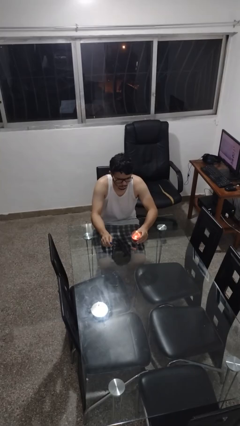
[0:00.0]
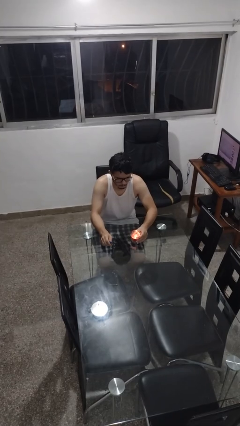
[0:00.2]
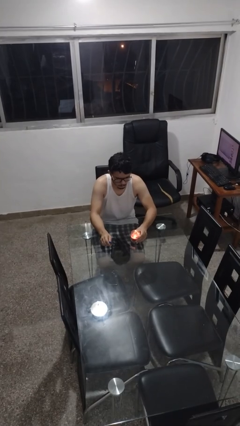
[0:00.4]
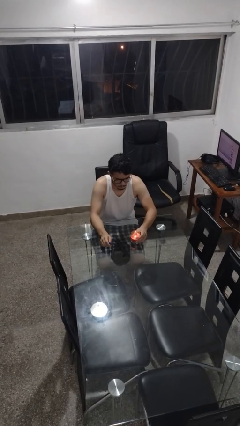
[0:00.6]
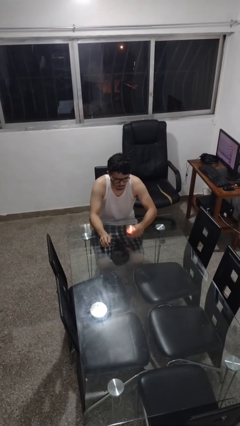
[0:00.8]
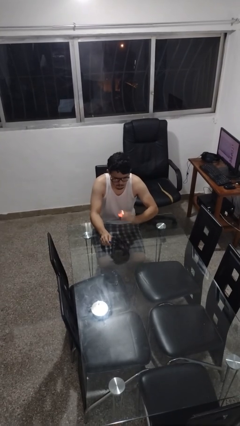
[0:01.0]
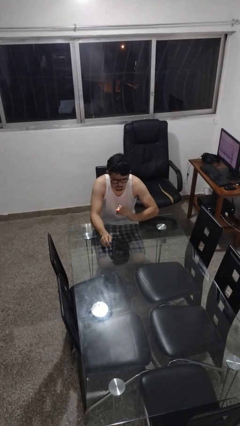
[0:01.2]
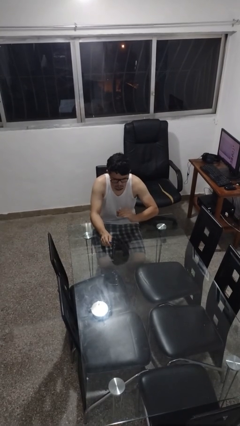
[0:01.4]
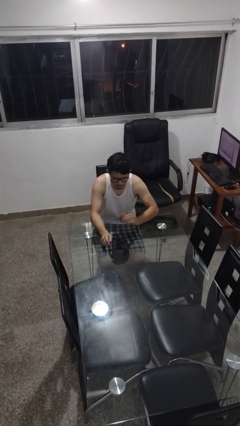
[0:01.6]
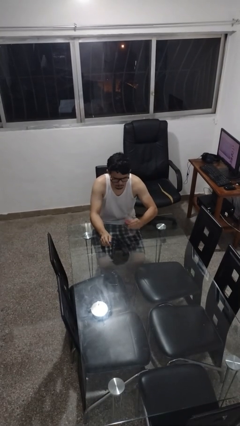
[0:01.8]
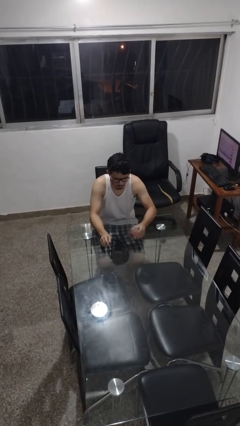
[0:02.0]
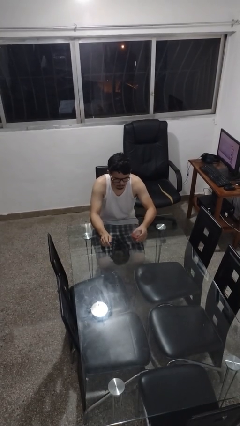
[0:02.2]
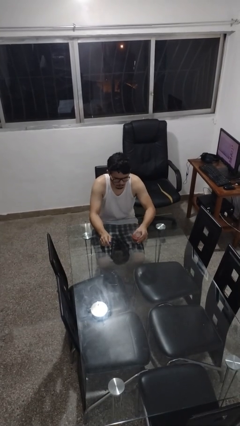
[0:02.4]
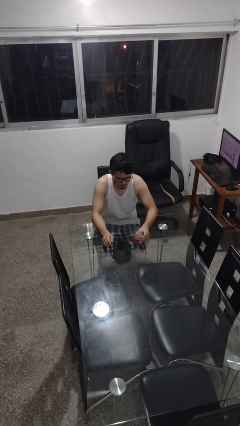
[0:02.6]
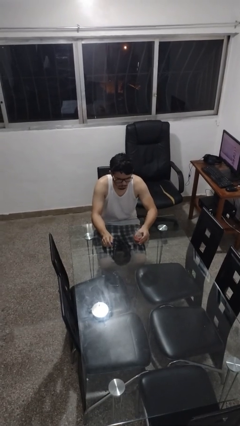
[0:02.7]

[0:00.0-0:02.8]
person extinguishes candle

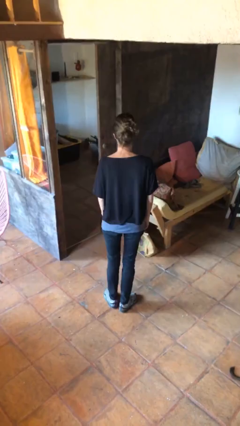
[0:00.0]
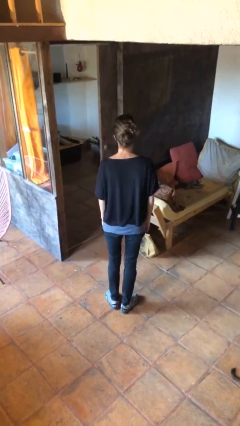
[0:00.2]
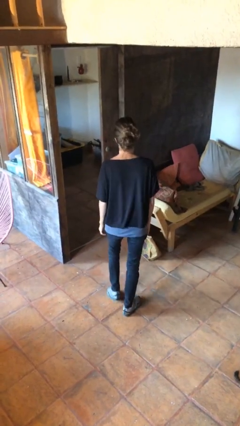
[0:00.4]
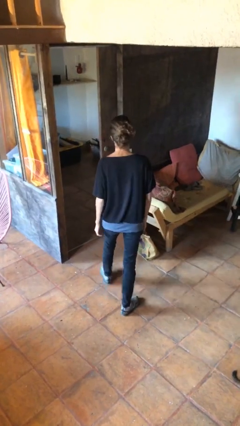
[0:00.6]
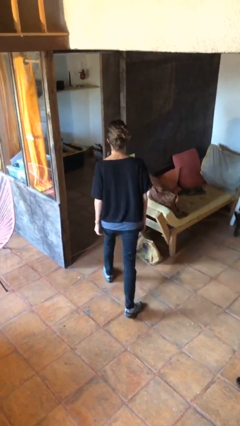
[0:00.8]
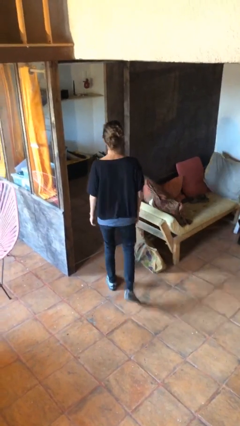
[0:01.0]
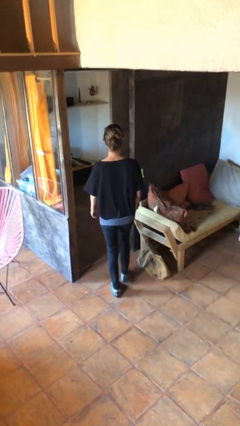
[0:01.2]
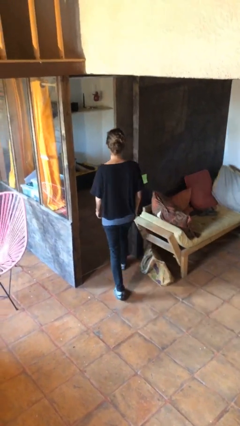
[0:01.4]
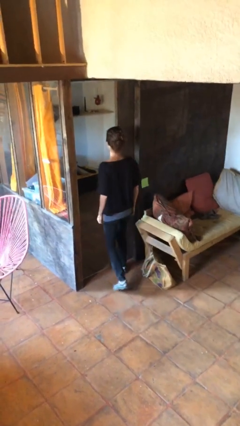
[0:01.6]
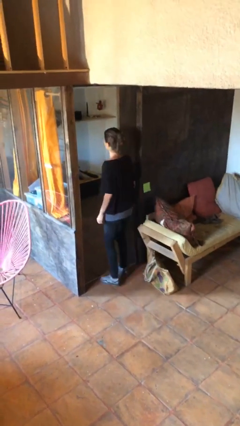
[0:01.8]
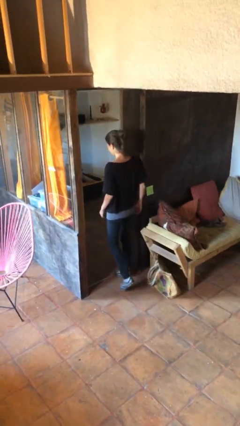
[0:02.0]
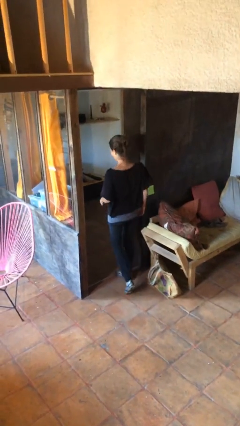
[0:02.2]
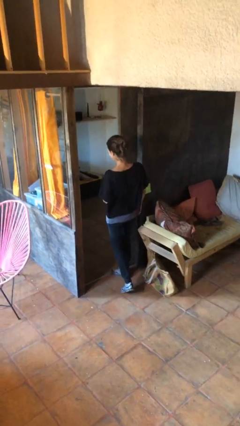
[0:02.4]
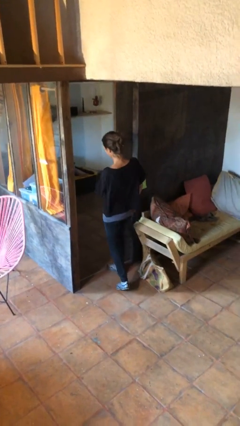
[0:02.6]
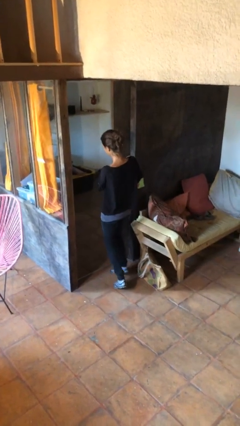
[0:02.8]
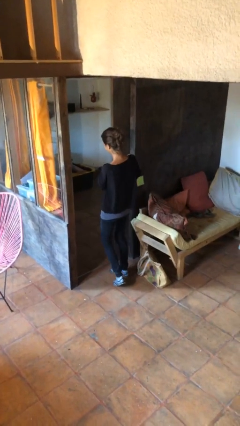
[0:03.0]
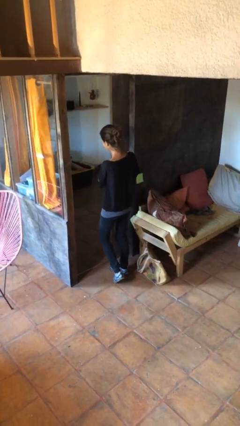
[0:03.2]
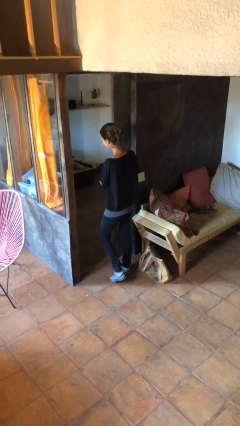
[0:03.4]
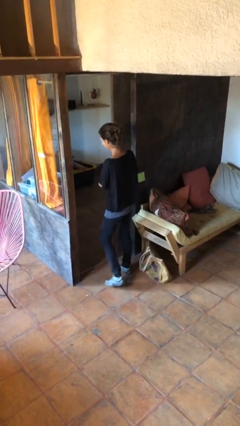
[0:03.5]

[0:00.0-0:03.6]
person bumps into wall

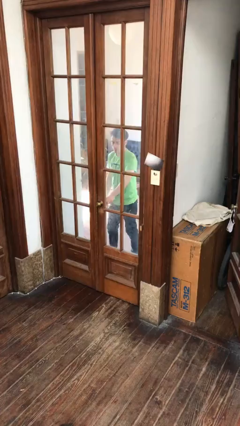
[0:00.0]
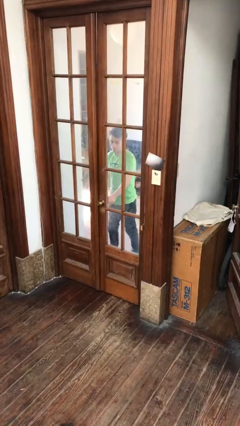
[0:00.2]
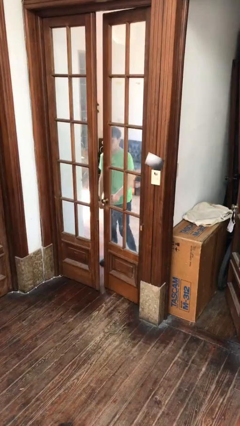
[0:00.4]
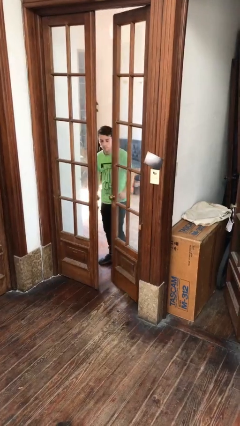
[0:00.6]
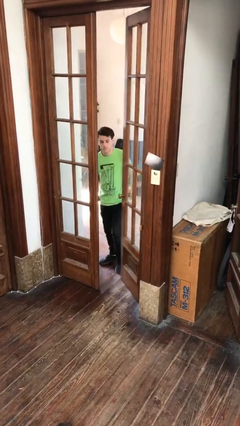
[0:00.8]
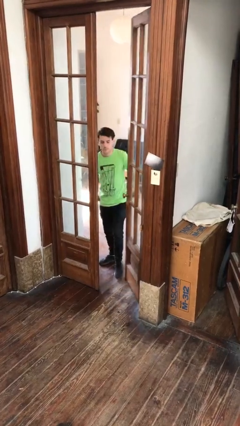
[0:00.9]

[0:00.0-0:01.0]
person opens facility door

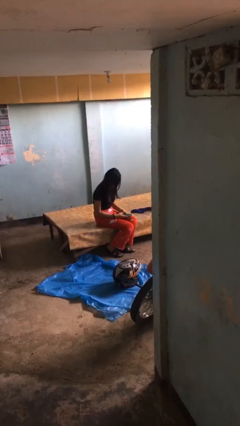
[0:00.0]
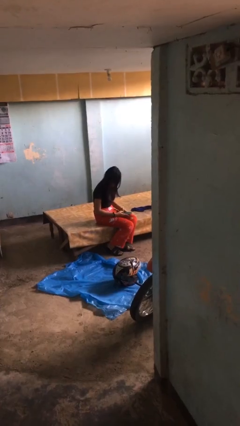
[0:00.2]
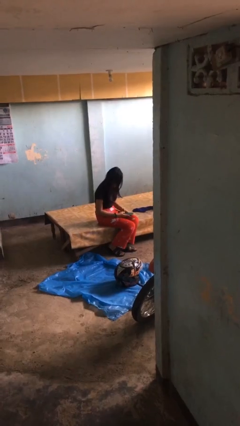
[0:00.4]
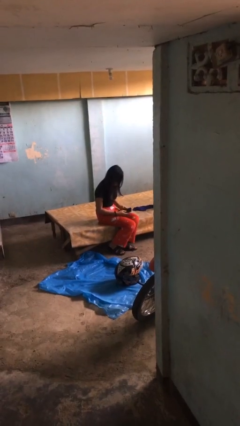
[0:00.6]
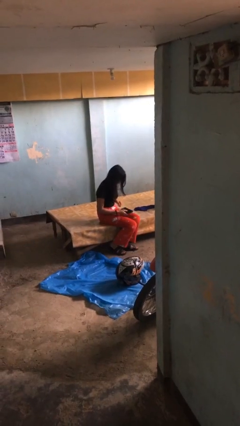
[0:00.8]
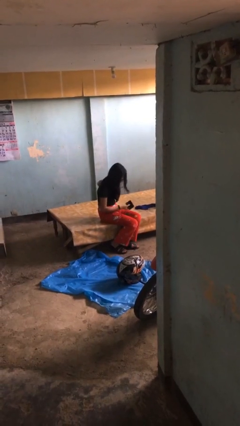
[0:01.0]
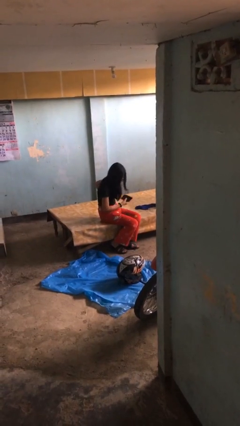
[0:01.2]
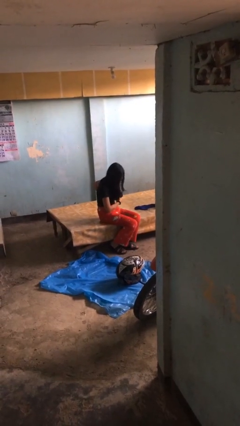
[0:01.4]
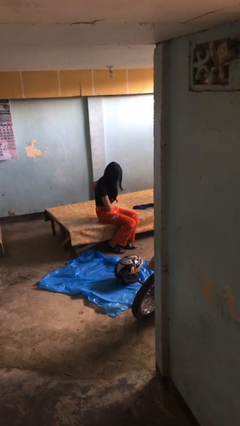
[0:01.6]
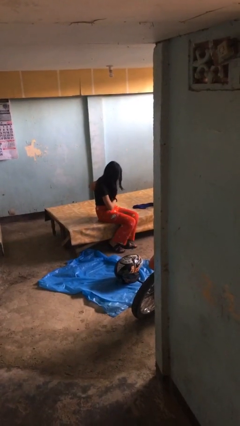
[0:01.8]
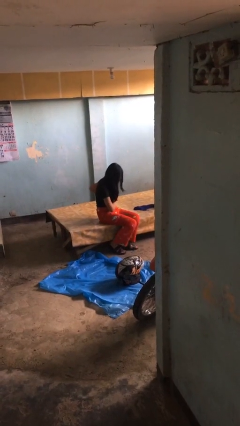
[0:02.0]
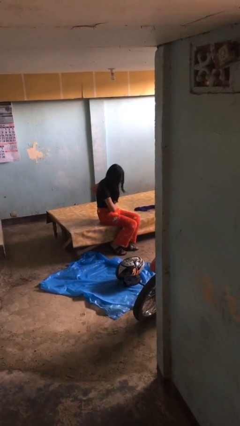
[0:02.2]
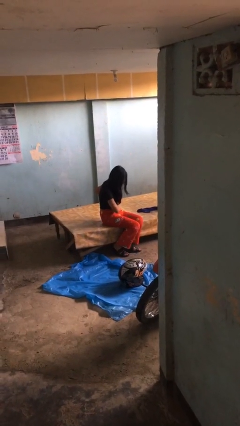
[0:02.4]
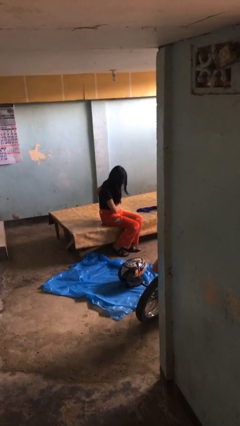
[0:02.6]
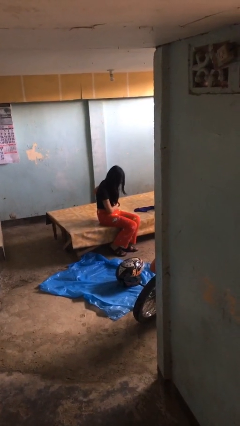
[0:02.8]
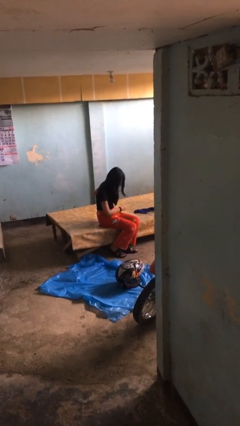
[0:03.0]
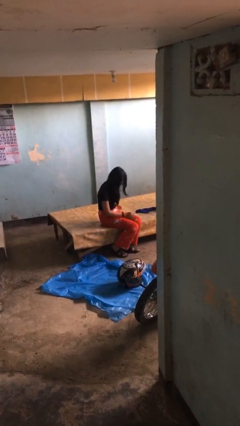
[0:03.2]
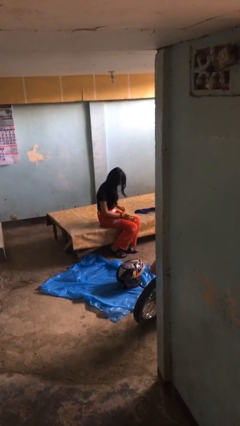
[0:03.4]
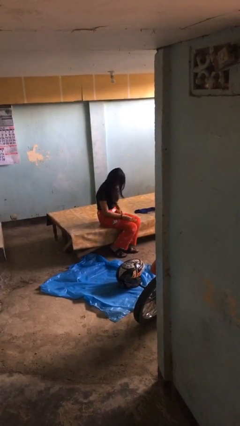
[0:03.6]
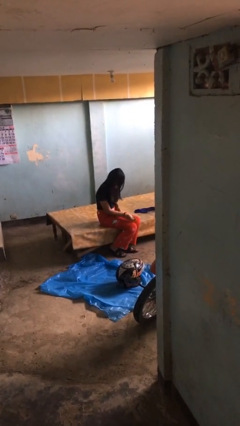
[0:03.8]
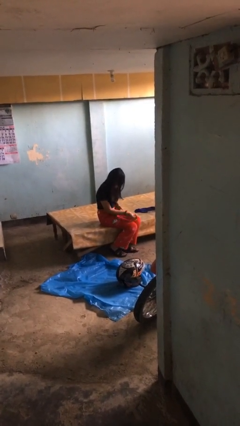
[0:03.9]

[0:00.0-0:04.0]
person puts phone into pocket

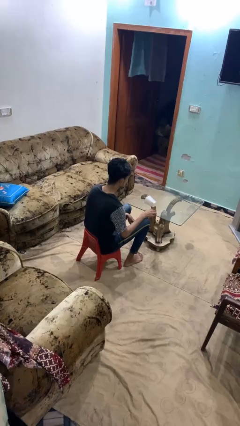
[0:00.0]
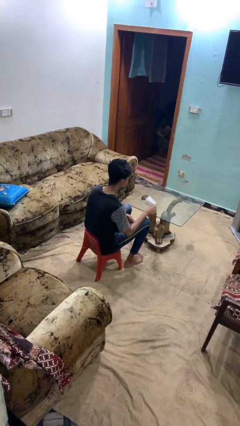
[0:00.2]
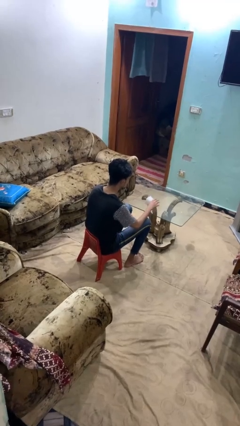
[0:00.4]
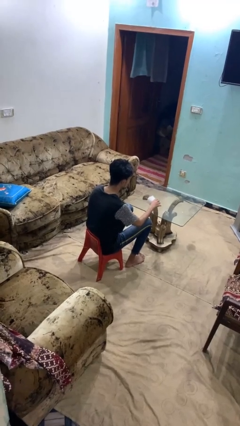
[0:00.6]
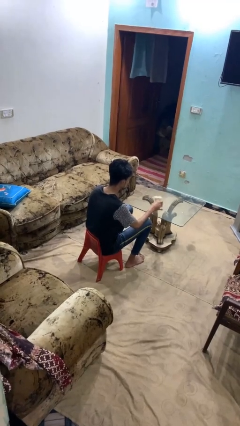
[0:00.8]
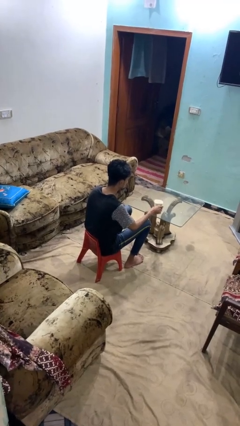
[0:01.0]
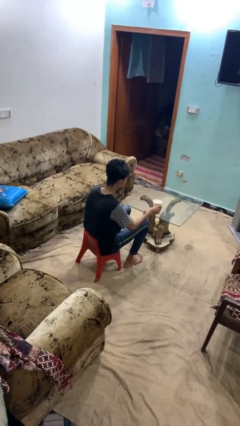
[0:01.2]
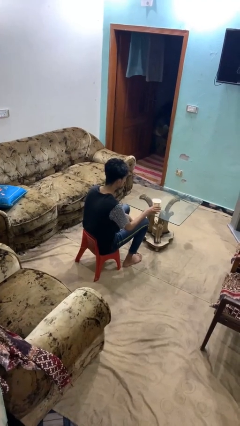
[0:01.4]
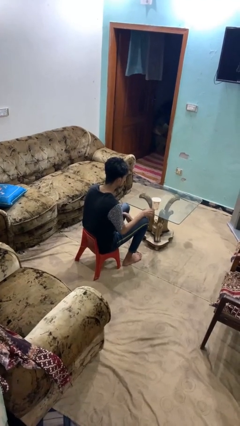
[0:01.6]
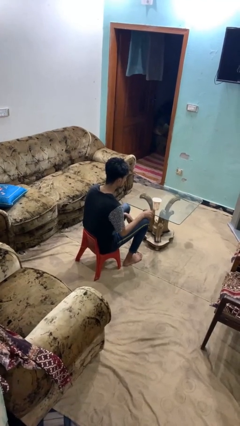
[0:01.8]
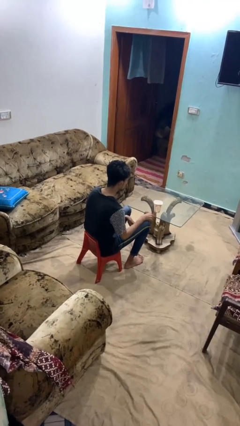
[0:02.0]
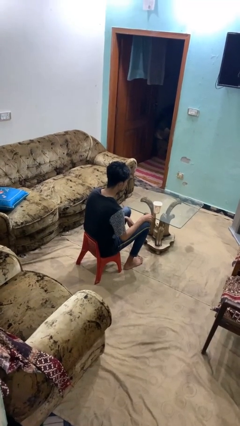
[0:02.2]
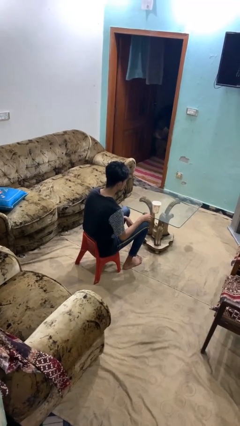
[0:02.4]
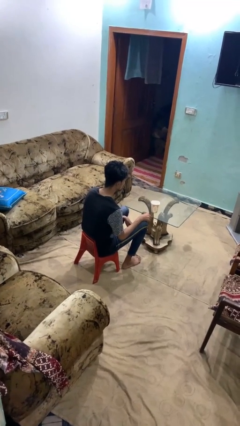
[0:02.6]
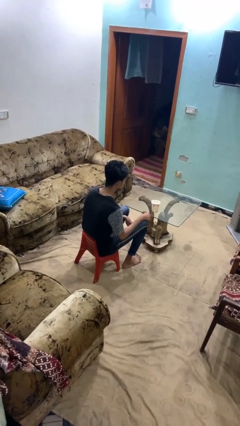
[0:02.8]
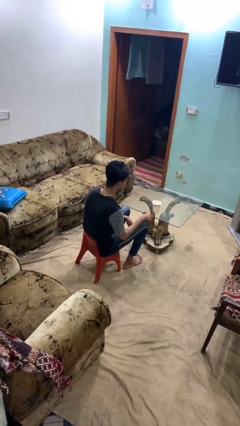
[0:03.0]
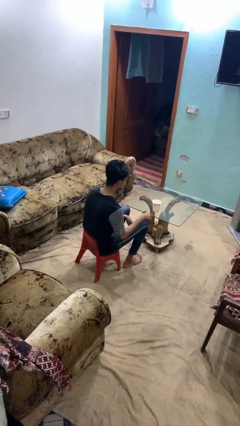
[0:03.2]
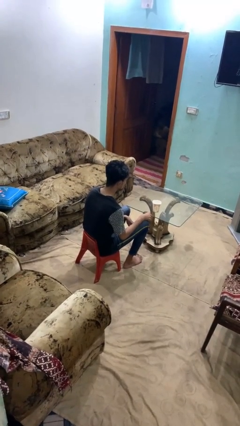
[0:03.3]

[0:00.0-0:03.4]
person sets upright glass

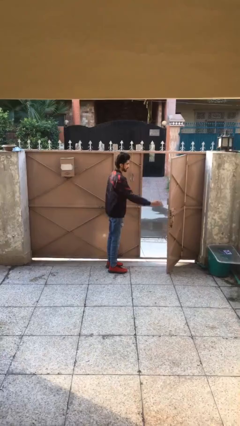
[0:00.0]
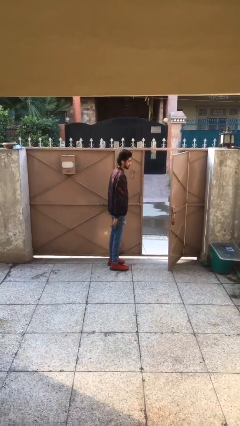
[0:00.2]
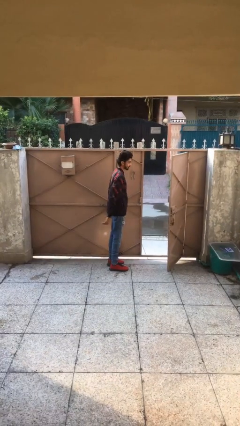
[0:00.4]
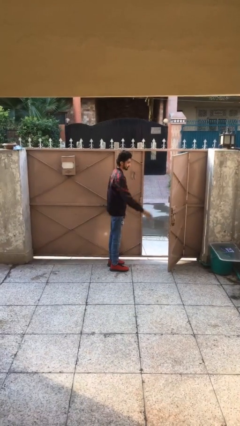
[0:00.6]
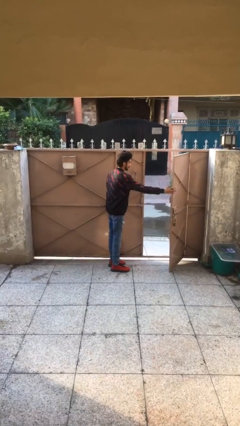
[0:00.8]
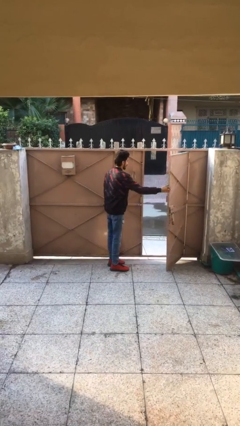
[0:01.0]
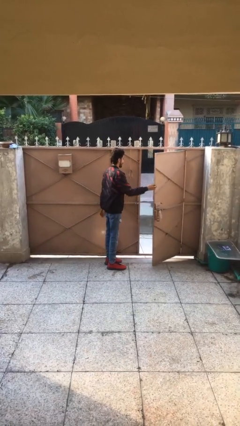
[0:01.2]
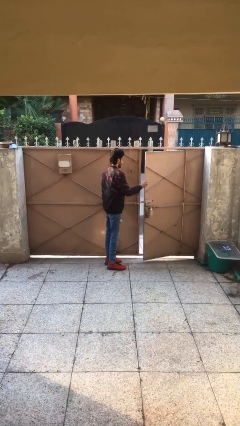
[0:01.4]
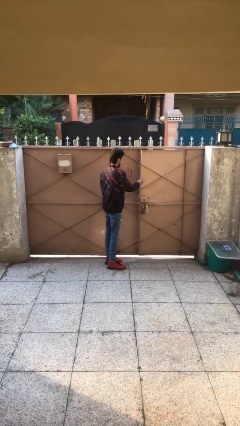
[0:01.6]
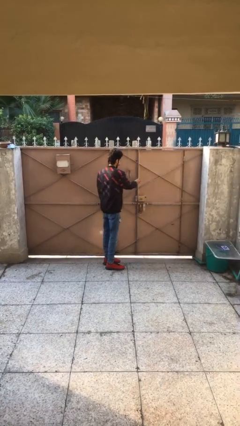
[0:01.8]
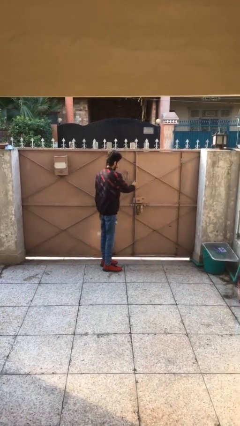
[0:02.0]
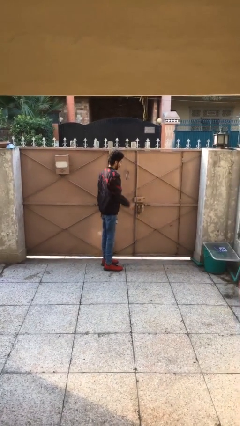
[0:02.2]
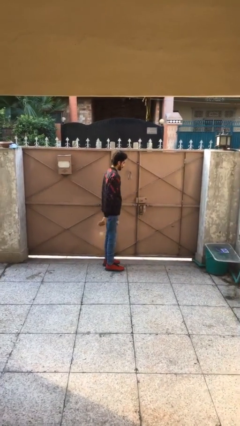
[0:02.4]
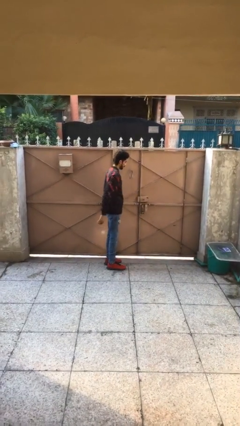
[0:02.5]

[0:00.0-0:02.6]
person closes facility door
